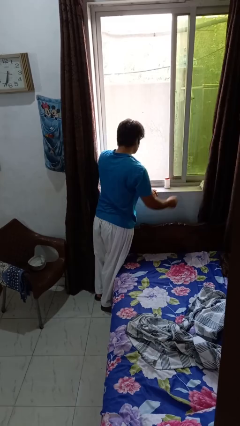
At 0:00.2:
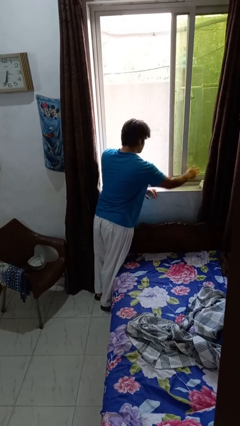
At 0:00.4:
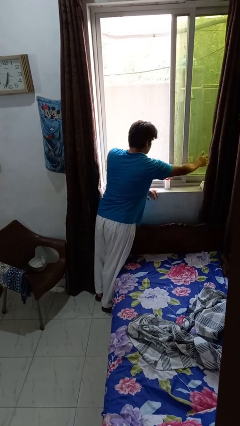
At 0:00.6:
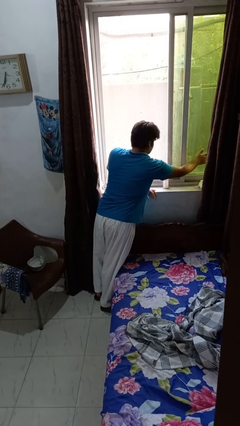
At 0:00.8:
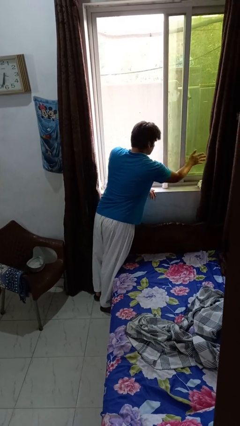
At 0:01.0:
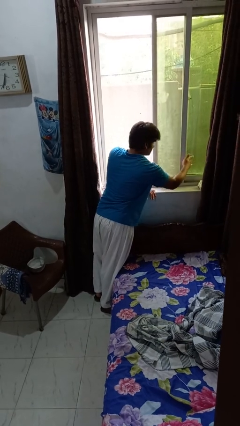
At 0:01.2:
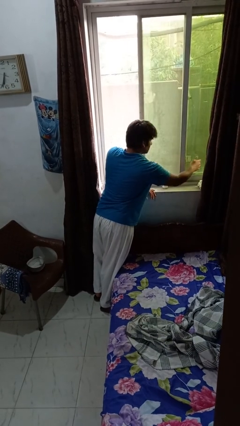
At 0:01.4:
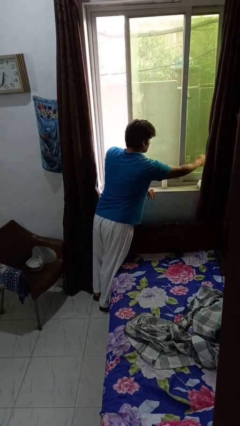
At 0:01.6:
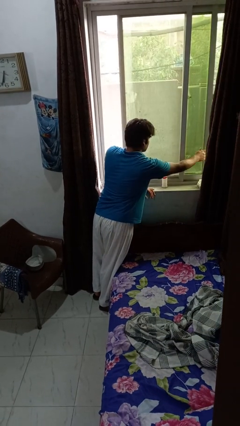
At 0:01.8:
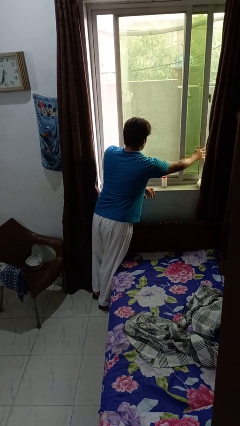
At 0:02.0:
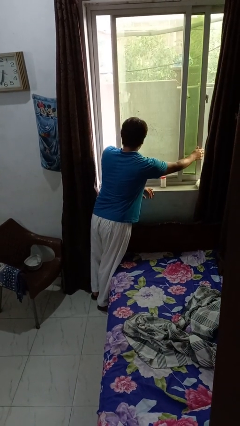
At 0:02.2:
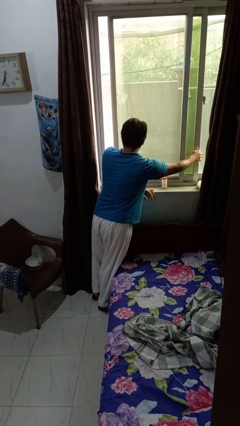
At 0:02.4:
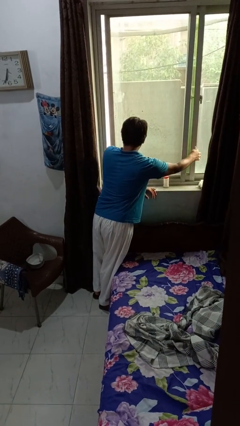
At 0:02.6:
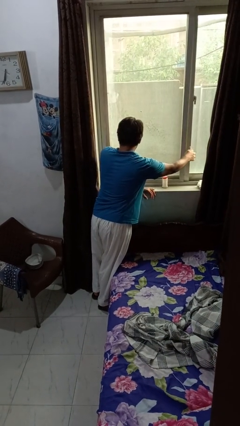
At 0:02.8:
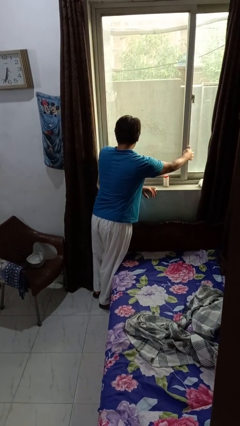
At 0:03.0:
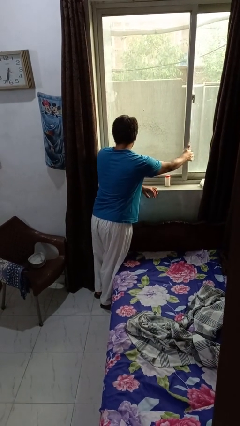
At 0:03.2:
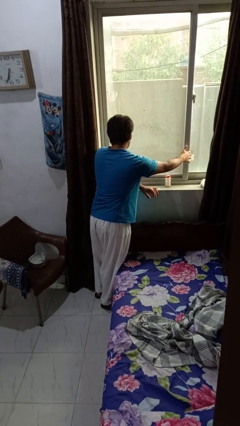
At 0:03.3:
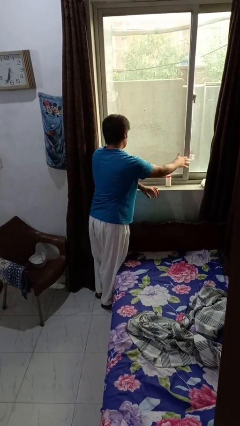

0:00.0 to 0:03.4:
person closes home window

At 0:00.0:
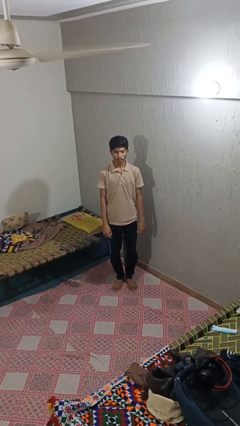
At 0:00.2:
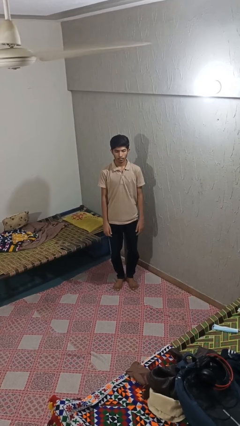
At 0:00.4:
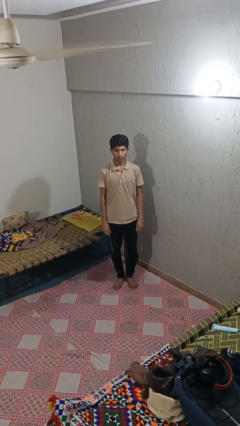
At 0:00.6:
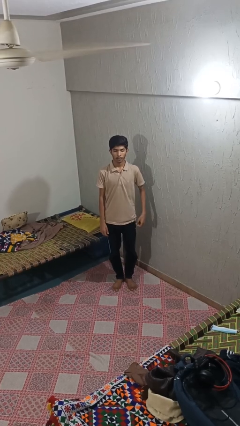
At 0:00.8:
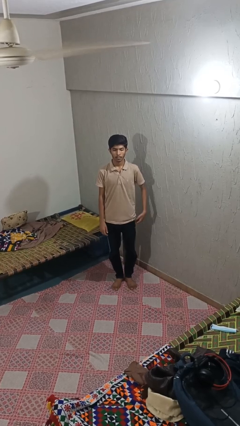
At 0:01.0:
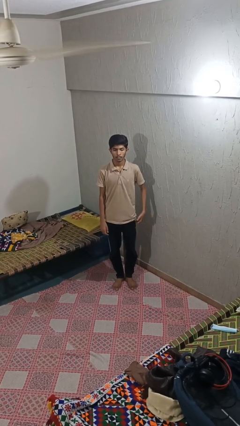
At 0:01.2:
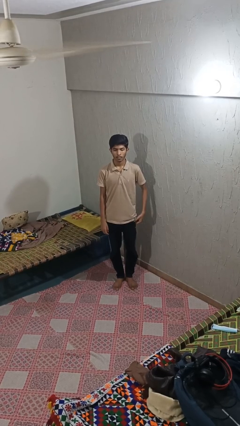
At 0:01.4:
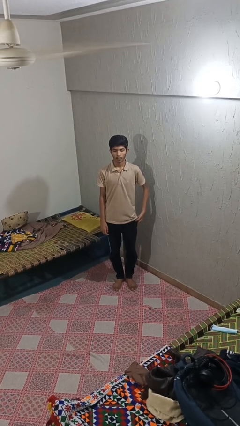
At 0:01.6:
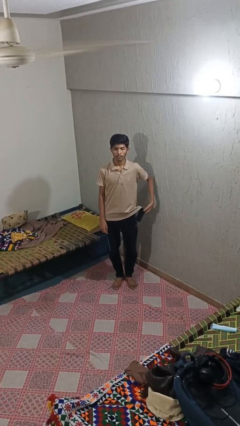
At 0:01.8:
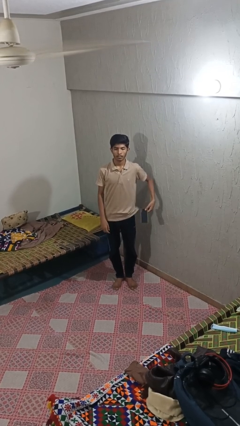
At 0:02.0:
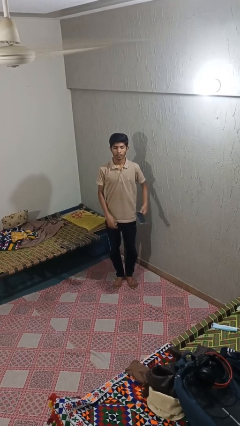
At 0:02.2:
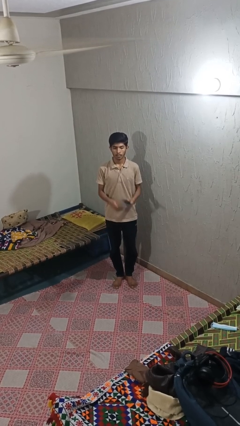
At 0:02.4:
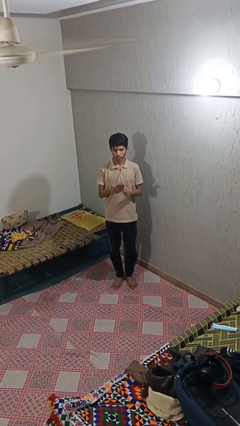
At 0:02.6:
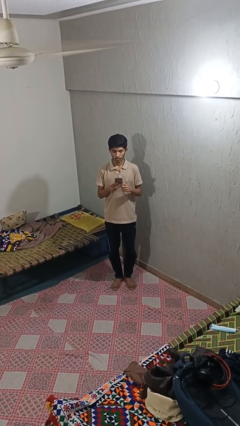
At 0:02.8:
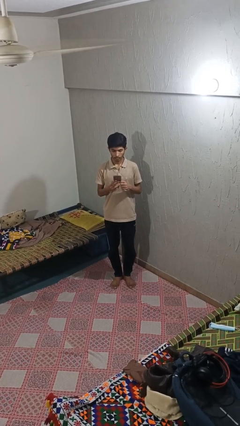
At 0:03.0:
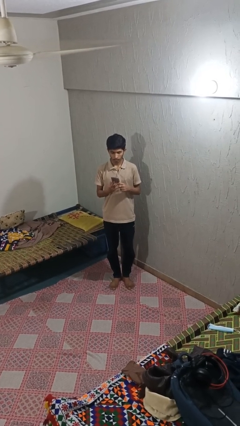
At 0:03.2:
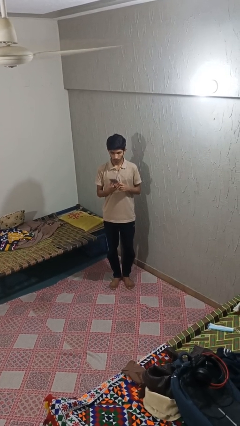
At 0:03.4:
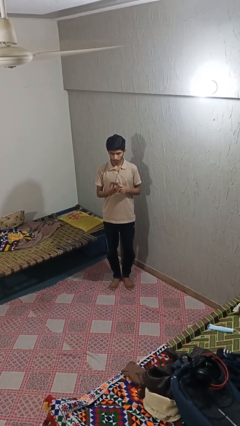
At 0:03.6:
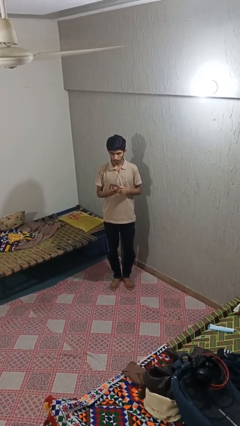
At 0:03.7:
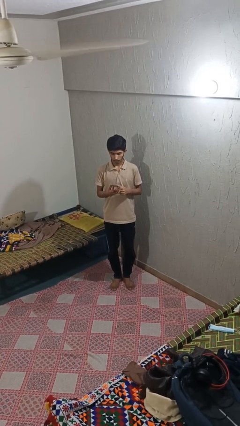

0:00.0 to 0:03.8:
person takes phone from pocket

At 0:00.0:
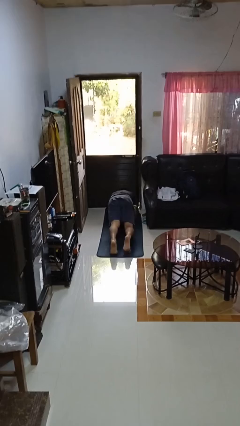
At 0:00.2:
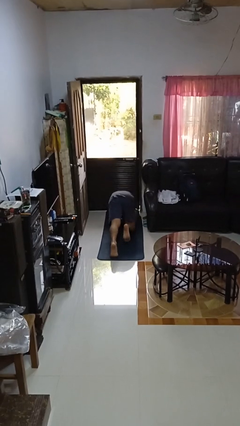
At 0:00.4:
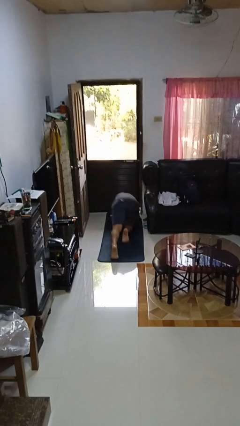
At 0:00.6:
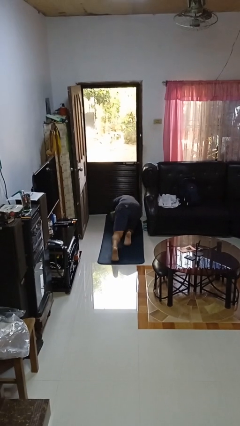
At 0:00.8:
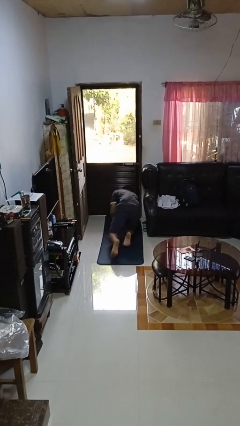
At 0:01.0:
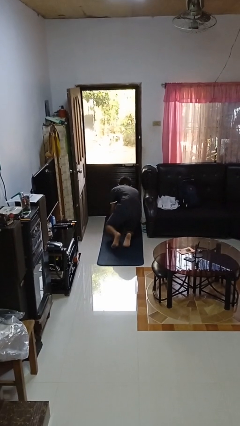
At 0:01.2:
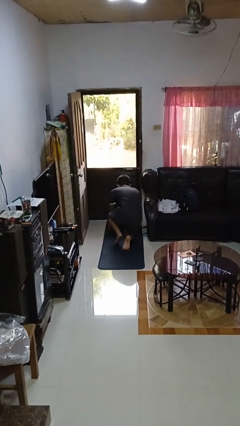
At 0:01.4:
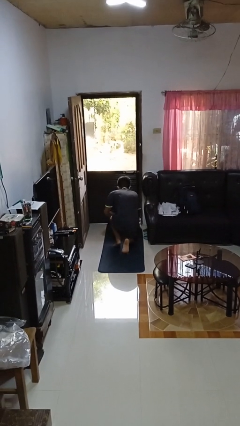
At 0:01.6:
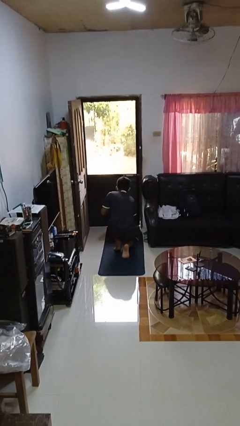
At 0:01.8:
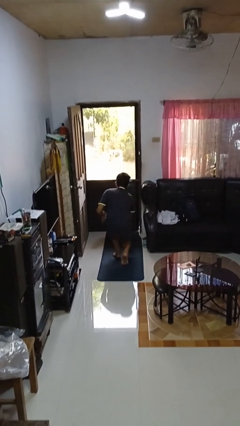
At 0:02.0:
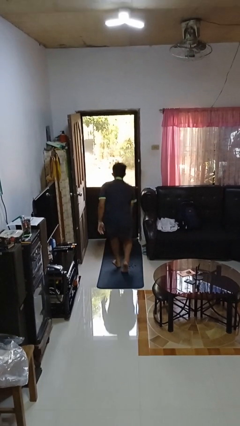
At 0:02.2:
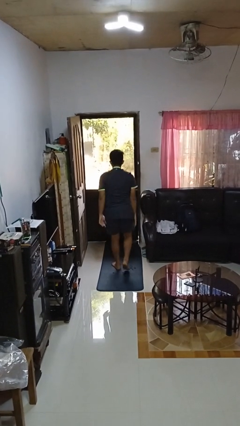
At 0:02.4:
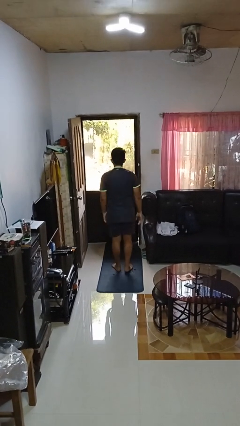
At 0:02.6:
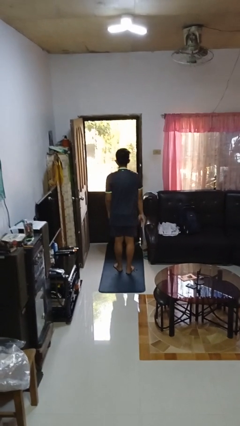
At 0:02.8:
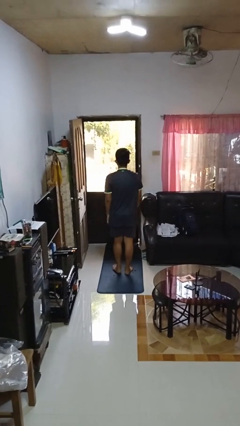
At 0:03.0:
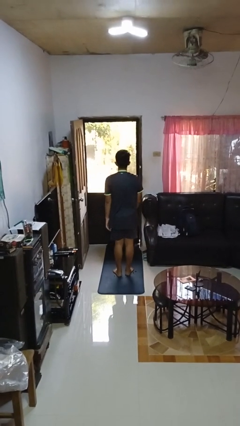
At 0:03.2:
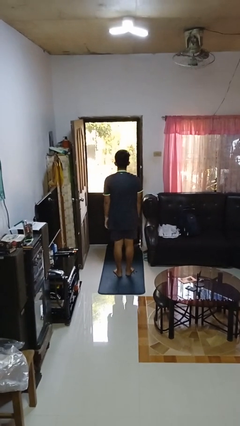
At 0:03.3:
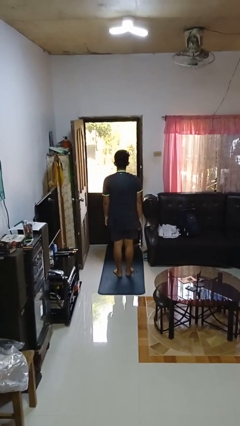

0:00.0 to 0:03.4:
person stands up from floor

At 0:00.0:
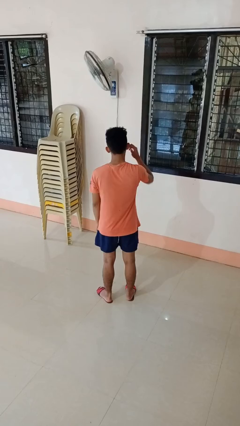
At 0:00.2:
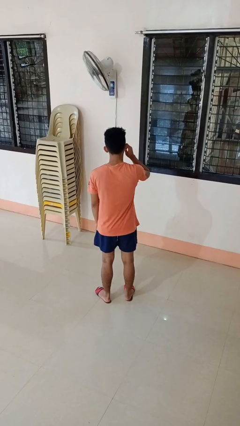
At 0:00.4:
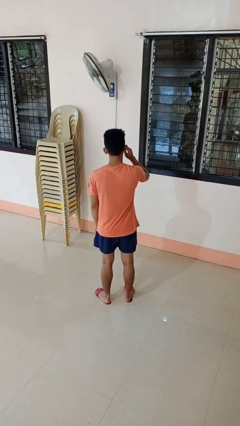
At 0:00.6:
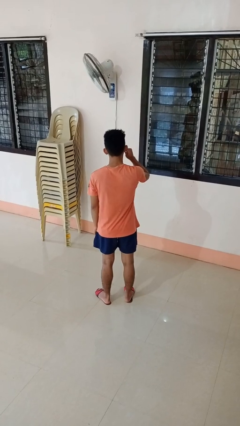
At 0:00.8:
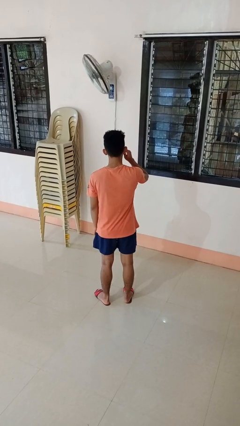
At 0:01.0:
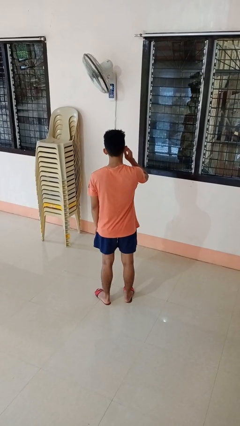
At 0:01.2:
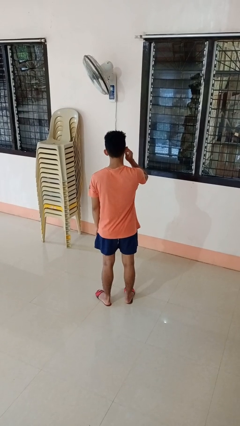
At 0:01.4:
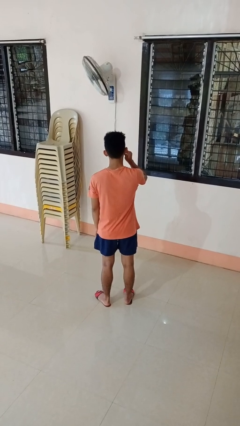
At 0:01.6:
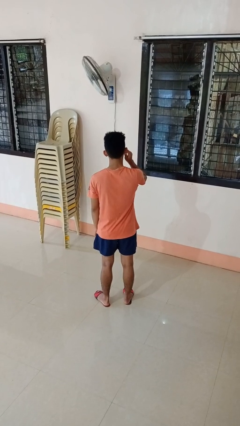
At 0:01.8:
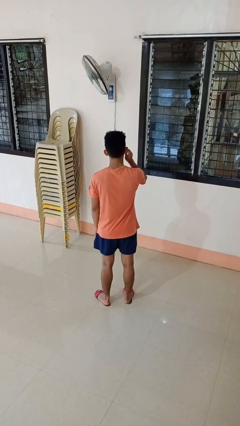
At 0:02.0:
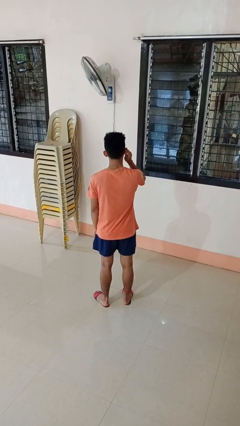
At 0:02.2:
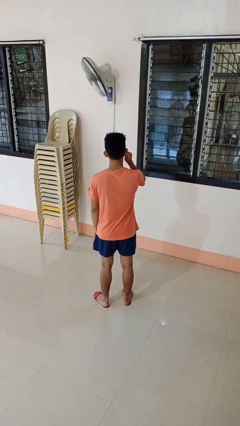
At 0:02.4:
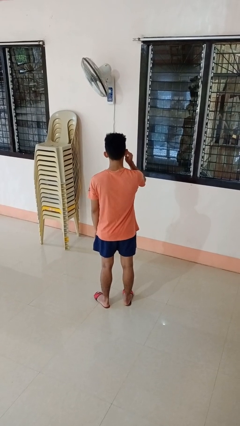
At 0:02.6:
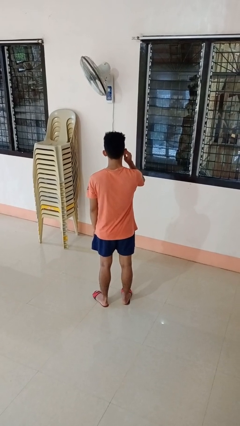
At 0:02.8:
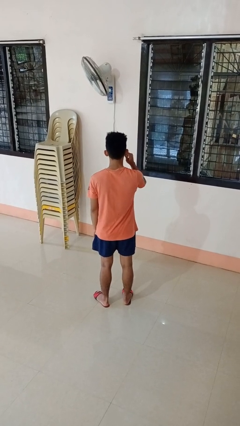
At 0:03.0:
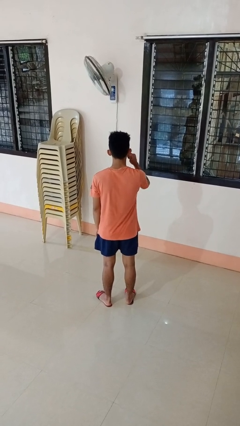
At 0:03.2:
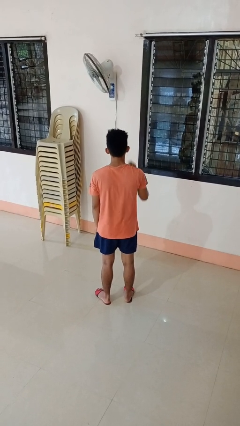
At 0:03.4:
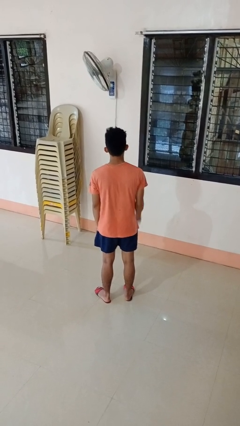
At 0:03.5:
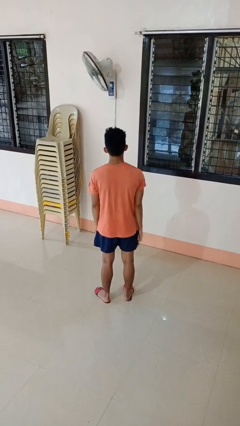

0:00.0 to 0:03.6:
person touches earlobe

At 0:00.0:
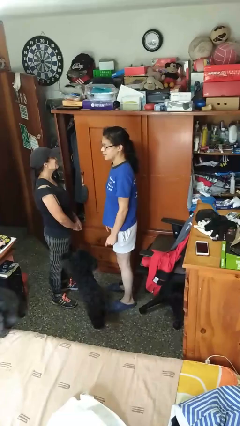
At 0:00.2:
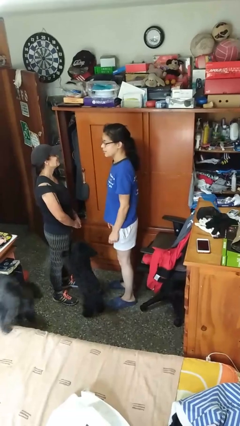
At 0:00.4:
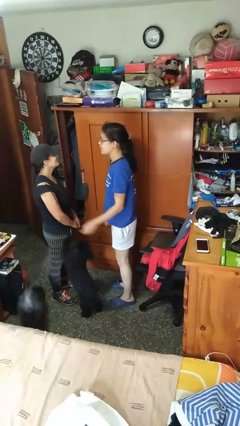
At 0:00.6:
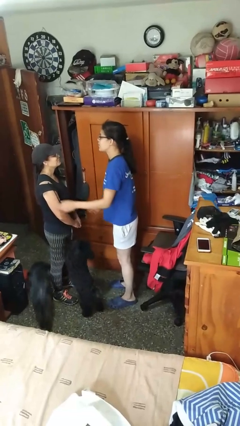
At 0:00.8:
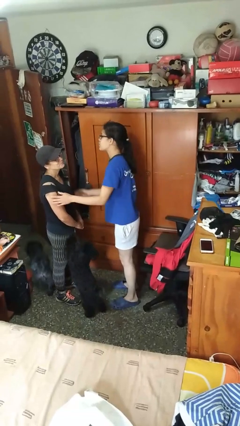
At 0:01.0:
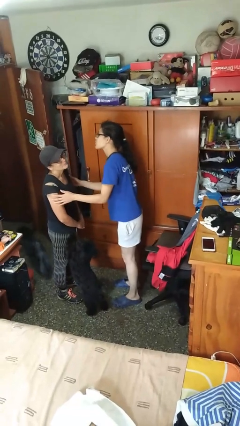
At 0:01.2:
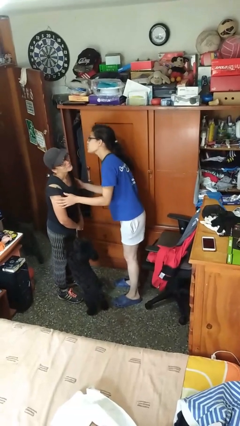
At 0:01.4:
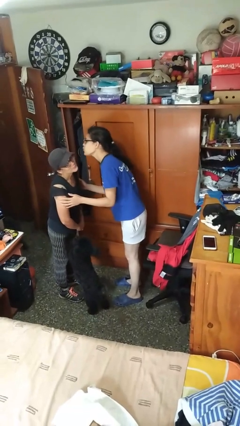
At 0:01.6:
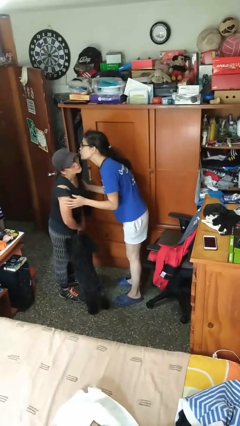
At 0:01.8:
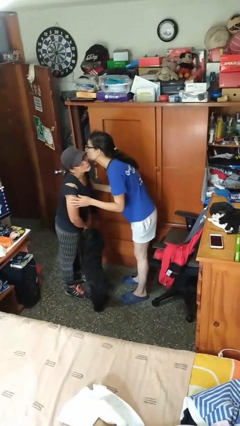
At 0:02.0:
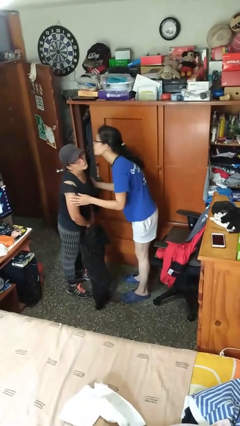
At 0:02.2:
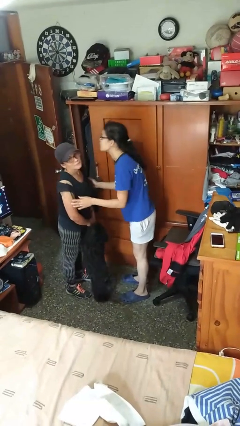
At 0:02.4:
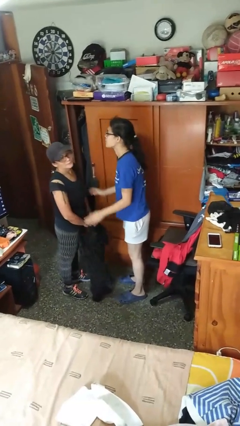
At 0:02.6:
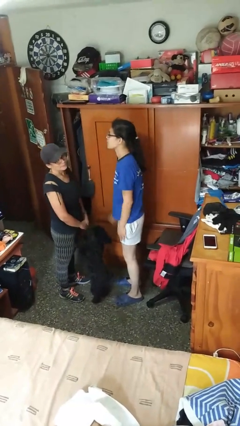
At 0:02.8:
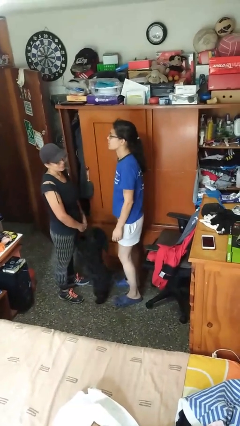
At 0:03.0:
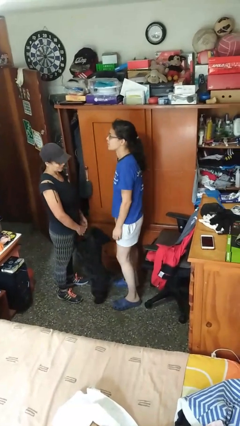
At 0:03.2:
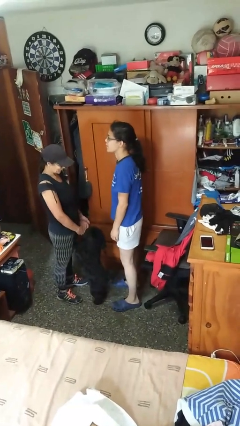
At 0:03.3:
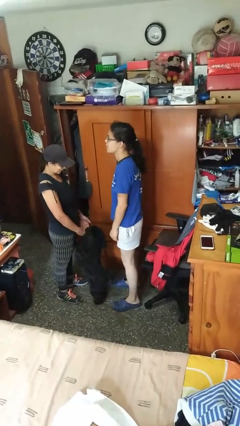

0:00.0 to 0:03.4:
person kisses cheek of person

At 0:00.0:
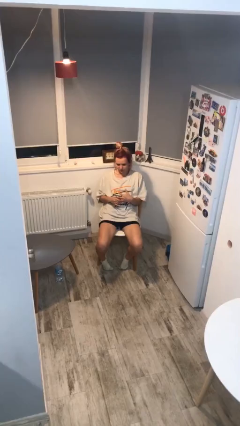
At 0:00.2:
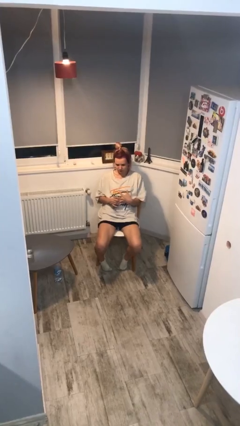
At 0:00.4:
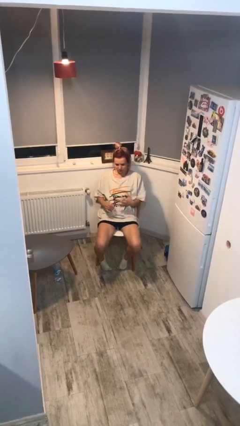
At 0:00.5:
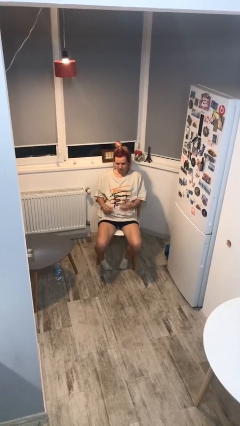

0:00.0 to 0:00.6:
person takes off ring
